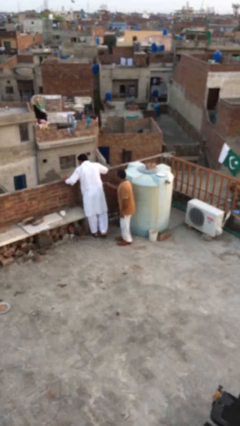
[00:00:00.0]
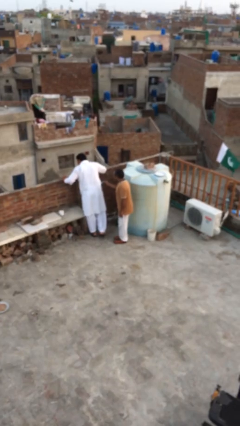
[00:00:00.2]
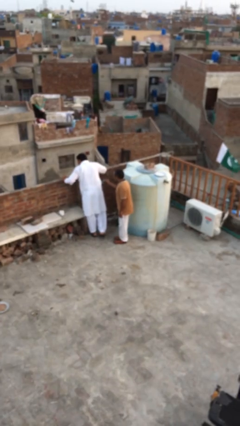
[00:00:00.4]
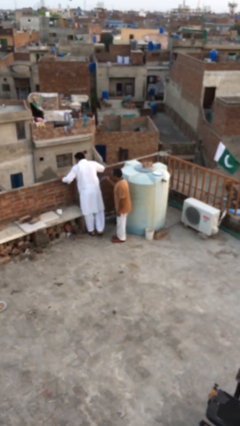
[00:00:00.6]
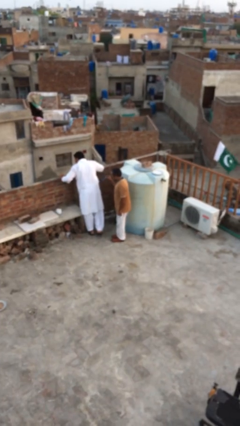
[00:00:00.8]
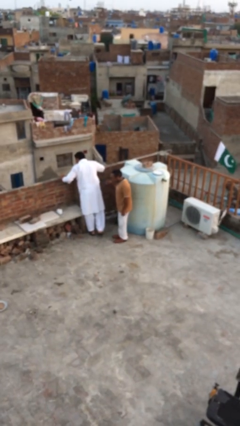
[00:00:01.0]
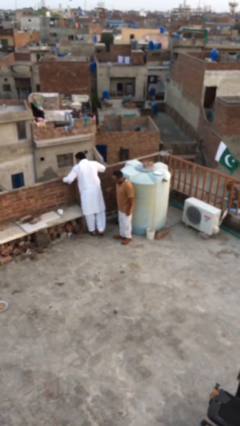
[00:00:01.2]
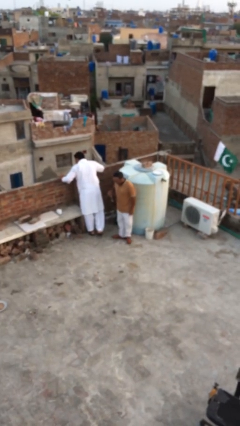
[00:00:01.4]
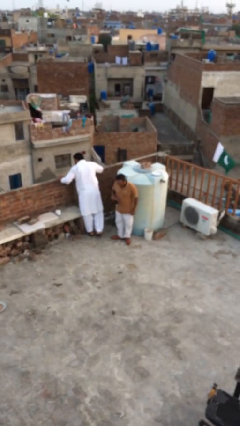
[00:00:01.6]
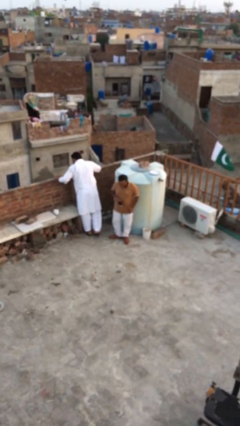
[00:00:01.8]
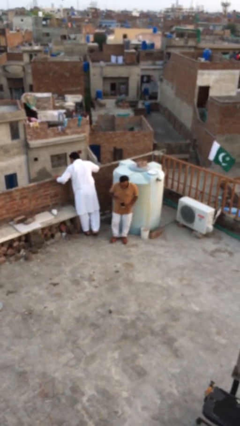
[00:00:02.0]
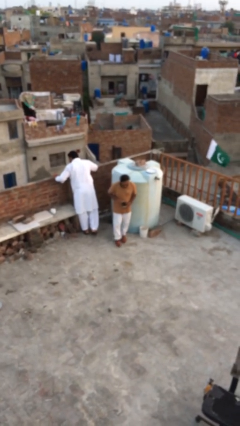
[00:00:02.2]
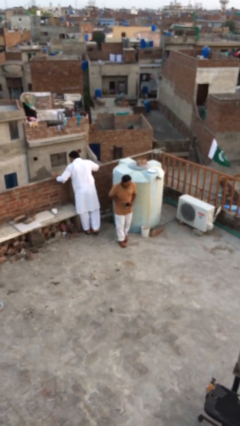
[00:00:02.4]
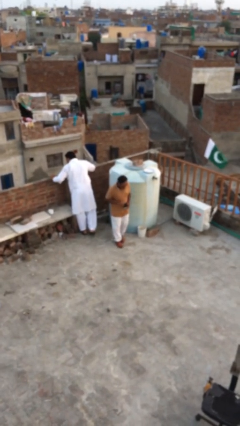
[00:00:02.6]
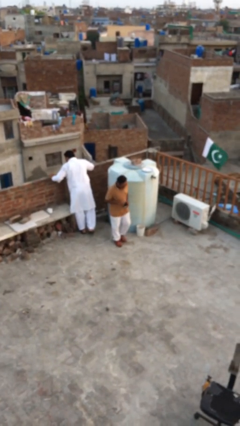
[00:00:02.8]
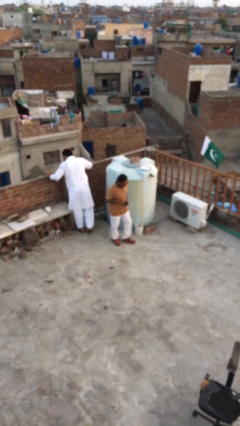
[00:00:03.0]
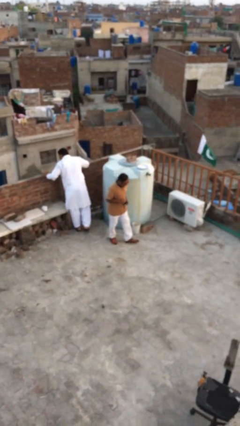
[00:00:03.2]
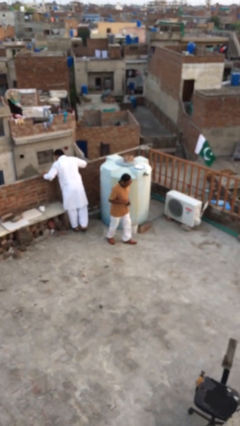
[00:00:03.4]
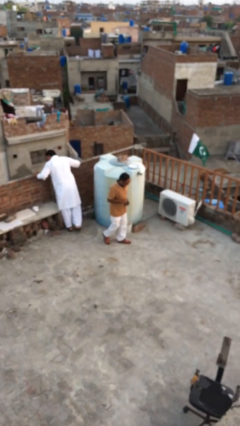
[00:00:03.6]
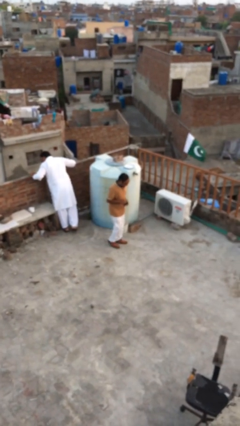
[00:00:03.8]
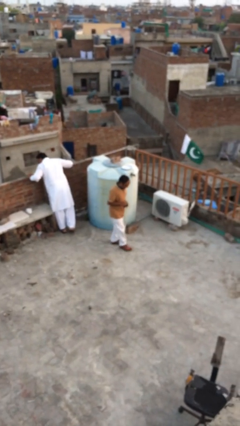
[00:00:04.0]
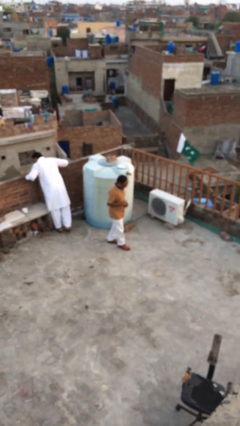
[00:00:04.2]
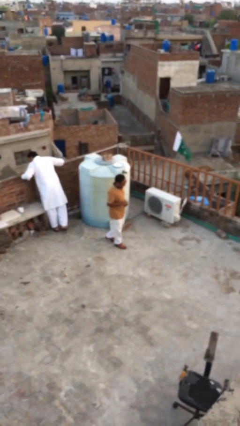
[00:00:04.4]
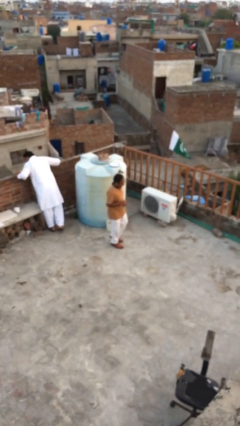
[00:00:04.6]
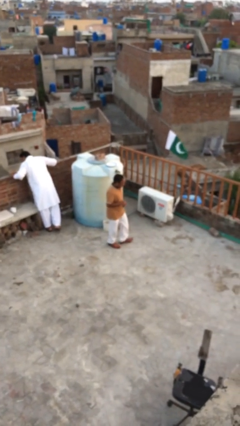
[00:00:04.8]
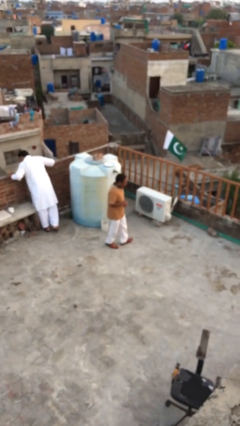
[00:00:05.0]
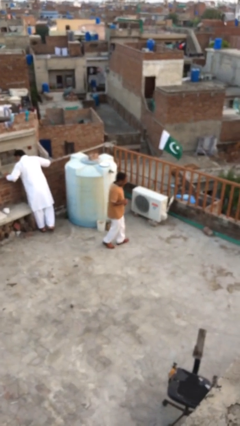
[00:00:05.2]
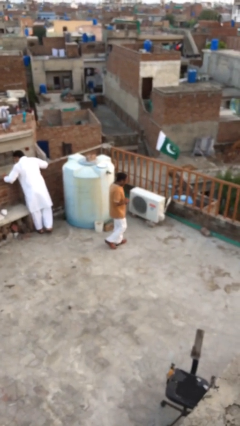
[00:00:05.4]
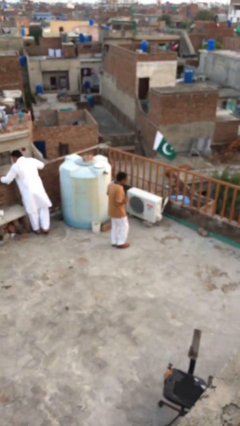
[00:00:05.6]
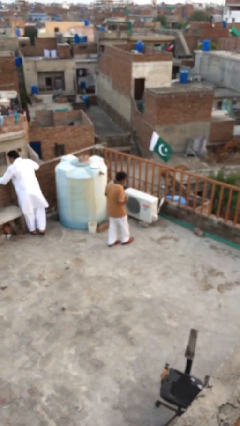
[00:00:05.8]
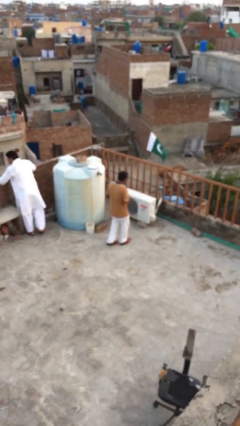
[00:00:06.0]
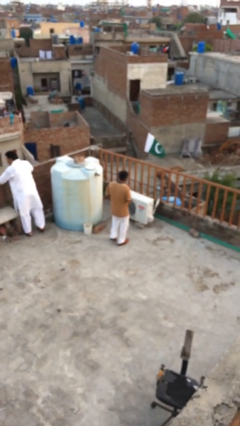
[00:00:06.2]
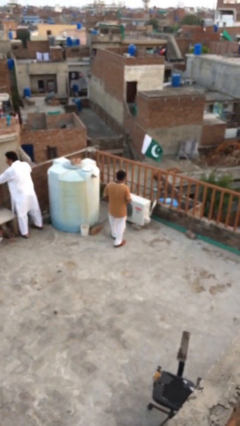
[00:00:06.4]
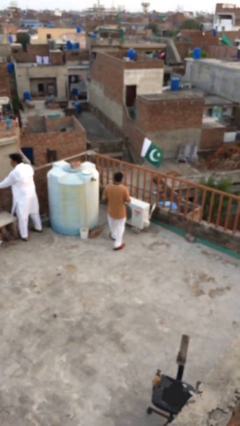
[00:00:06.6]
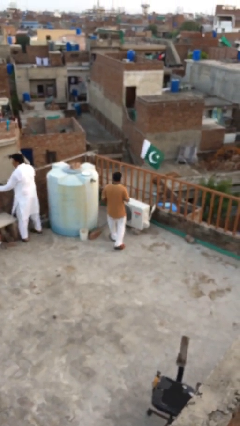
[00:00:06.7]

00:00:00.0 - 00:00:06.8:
person steals object from person

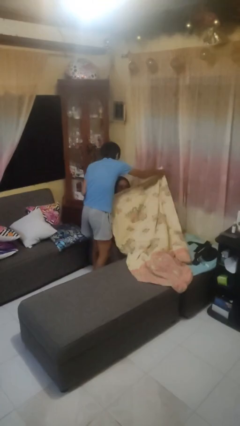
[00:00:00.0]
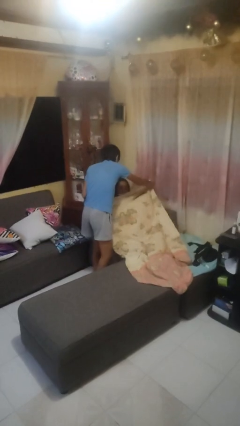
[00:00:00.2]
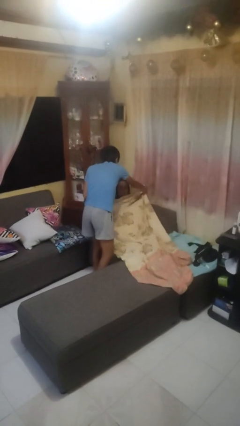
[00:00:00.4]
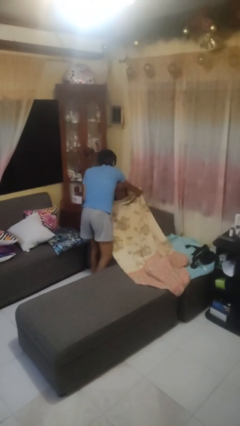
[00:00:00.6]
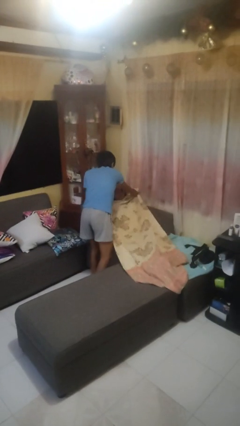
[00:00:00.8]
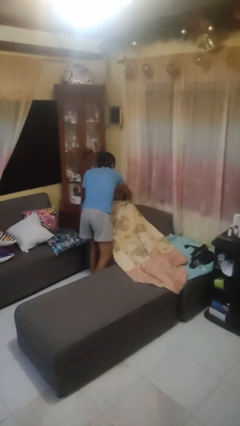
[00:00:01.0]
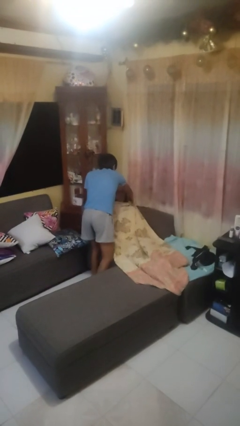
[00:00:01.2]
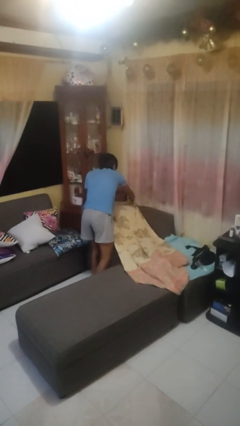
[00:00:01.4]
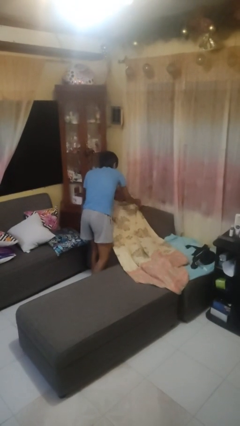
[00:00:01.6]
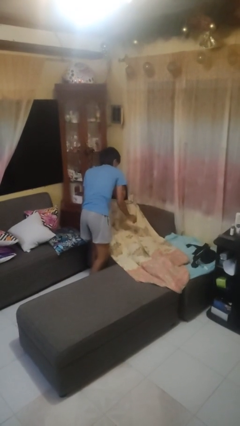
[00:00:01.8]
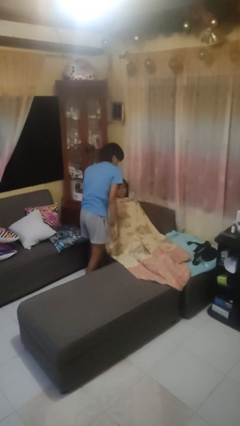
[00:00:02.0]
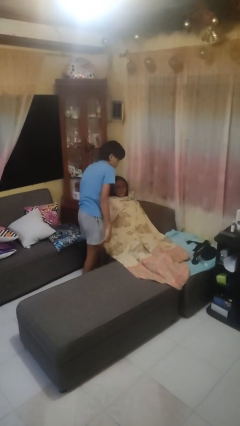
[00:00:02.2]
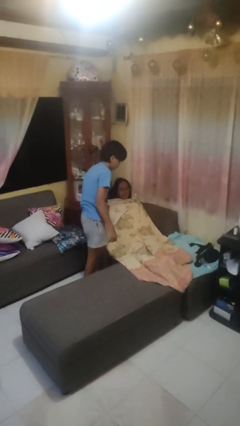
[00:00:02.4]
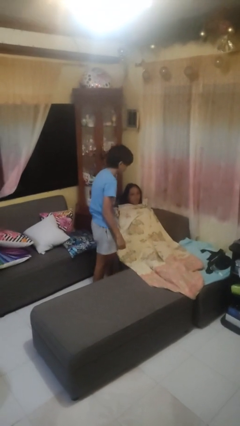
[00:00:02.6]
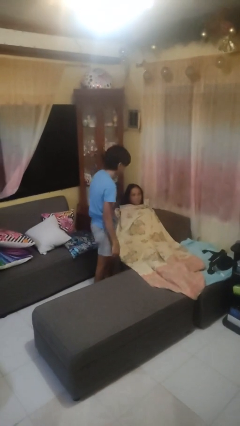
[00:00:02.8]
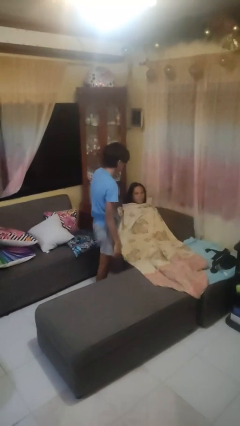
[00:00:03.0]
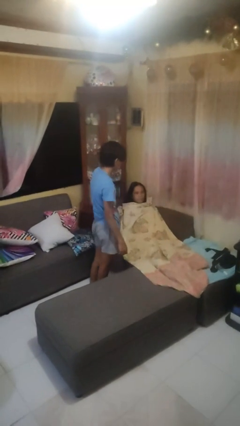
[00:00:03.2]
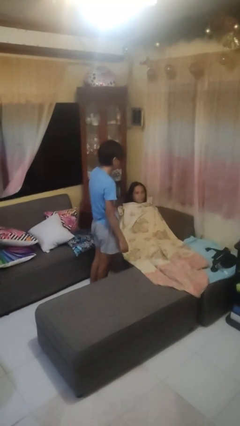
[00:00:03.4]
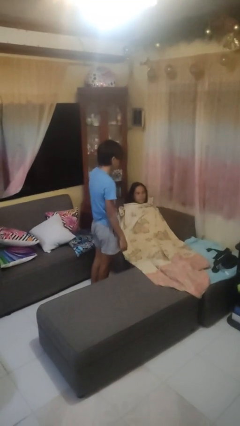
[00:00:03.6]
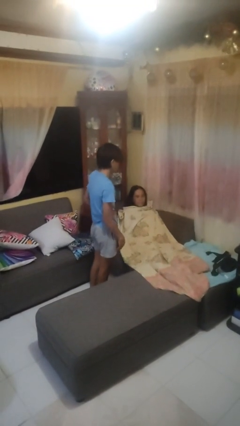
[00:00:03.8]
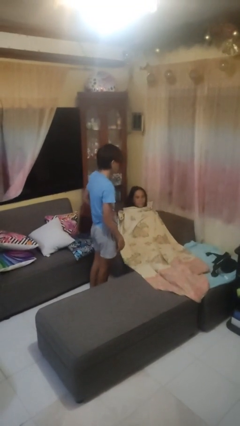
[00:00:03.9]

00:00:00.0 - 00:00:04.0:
person covers friend with blanket

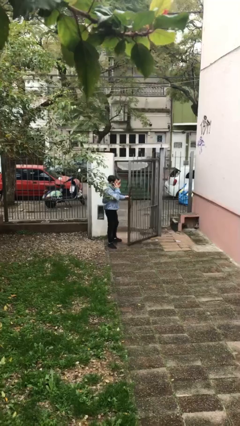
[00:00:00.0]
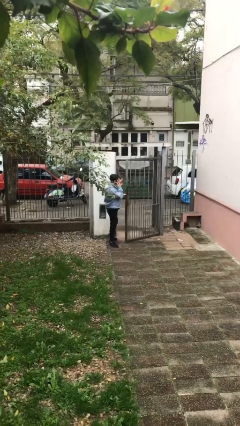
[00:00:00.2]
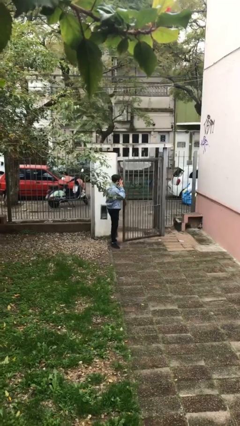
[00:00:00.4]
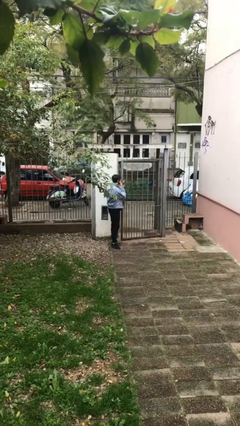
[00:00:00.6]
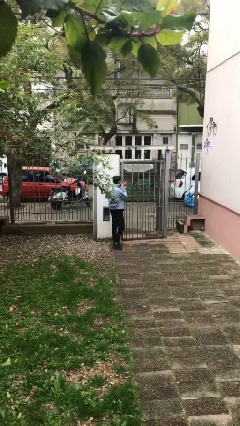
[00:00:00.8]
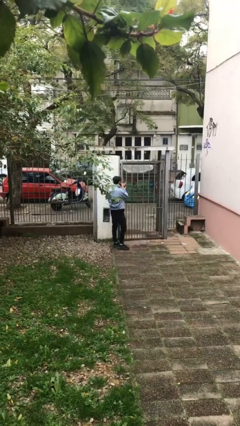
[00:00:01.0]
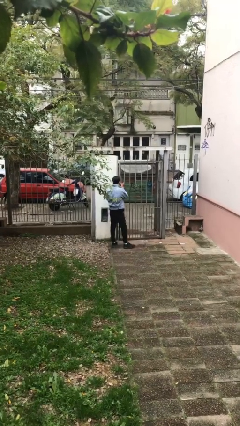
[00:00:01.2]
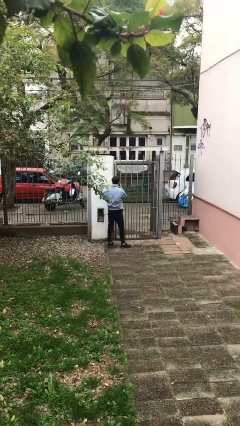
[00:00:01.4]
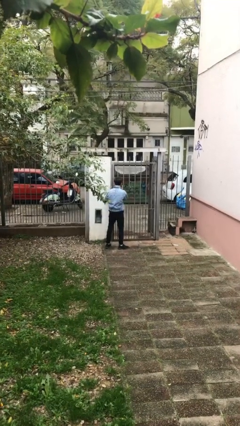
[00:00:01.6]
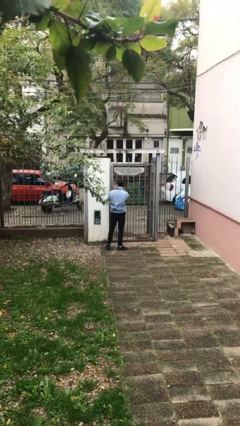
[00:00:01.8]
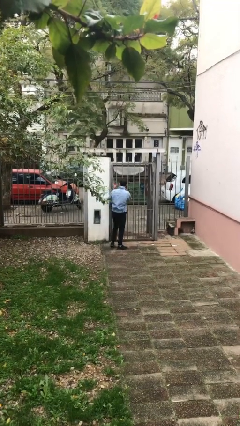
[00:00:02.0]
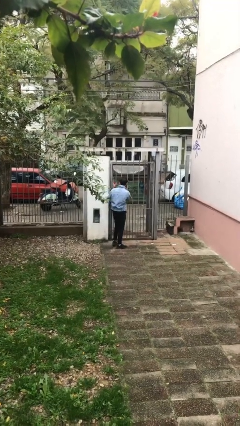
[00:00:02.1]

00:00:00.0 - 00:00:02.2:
person closes facility door

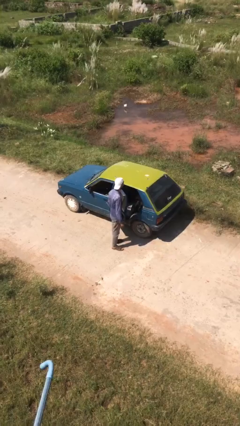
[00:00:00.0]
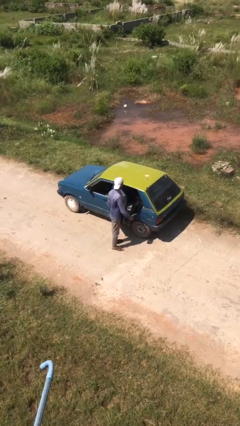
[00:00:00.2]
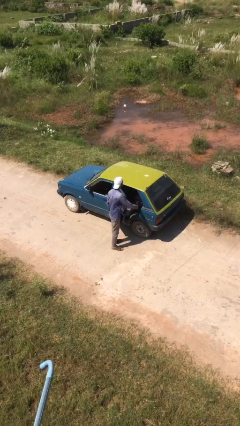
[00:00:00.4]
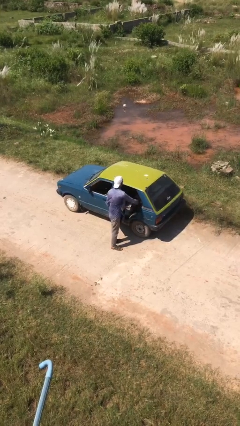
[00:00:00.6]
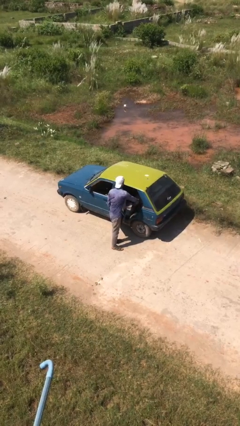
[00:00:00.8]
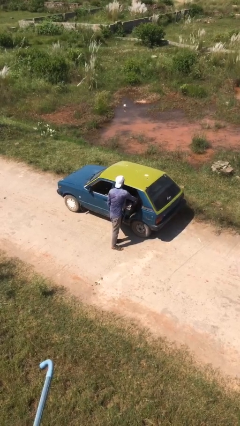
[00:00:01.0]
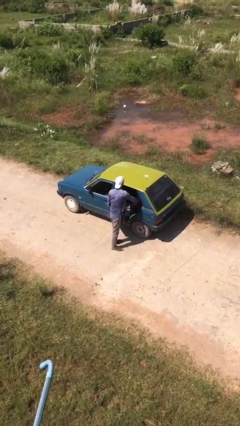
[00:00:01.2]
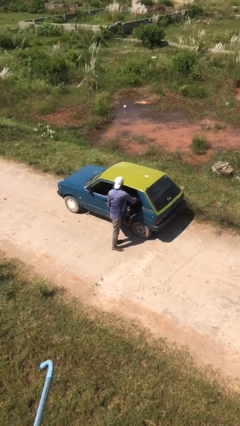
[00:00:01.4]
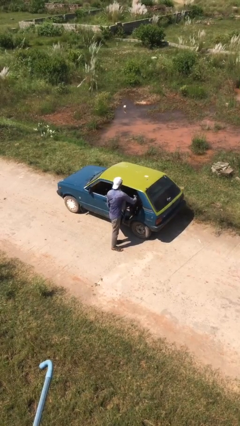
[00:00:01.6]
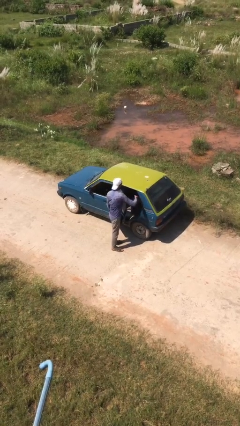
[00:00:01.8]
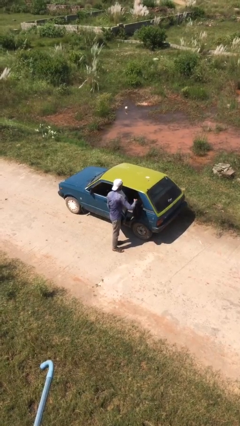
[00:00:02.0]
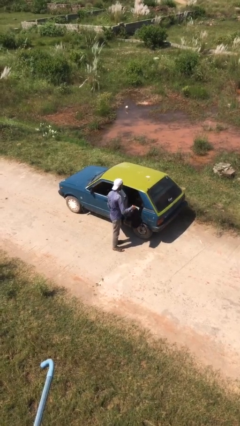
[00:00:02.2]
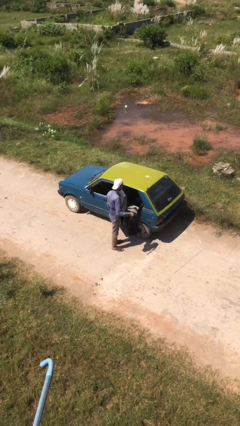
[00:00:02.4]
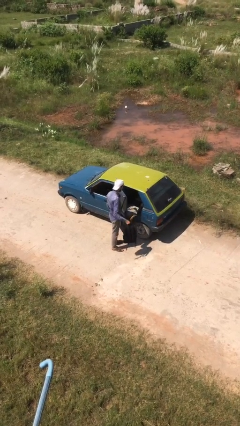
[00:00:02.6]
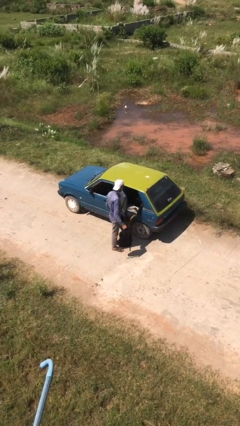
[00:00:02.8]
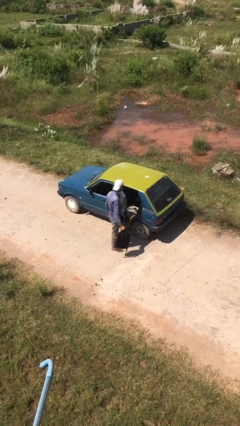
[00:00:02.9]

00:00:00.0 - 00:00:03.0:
person unloads car

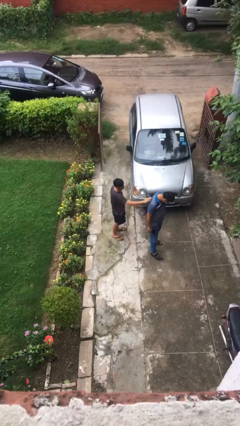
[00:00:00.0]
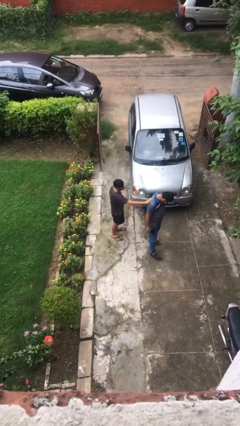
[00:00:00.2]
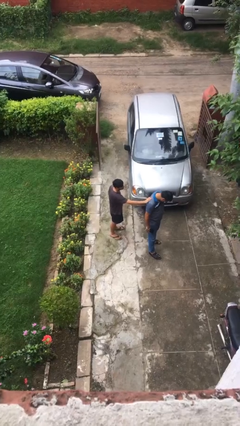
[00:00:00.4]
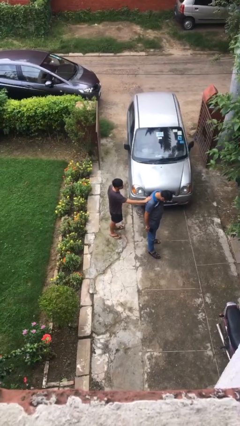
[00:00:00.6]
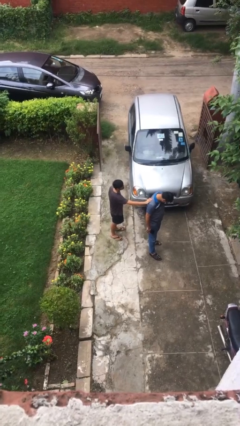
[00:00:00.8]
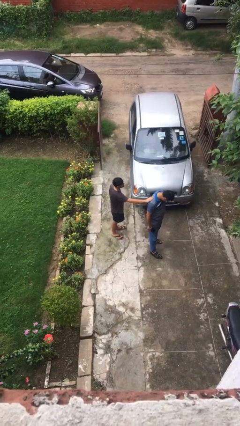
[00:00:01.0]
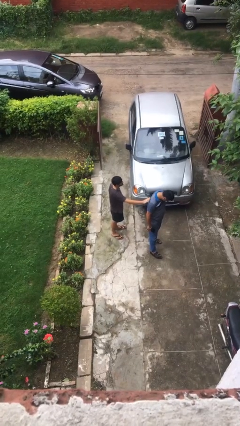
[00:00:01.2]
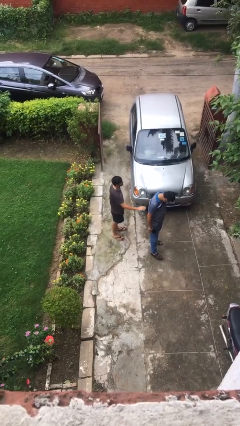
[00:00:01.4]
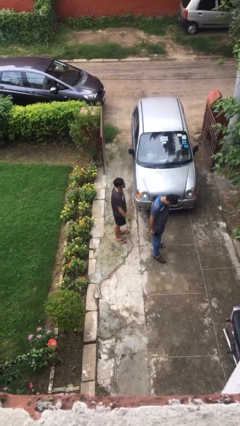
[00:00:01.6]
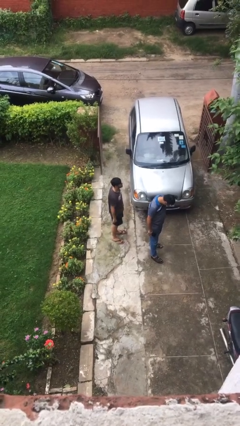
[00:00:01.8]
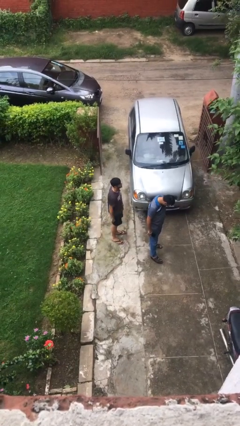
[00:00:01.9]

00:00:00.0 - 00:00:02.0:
person touches back of person
